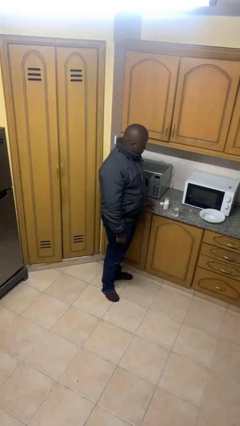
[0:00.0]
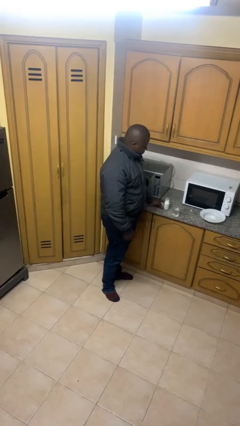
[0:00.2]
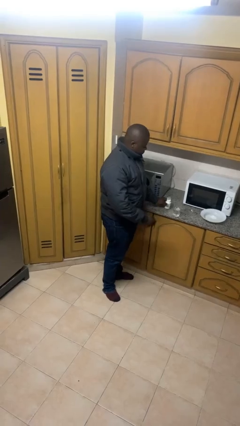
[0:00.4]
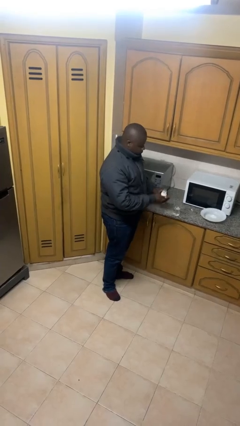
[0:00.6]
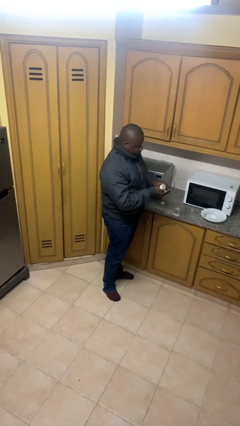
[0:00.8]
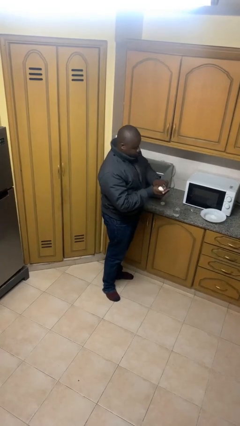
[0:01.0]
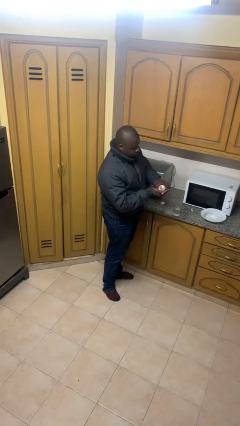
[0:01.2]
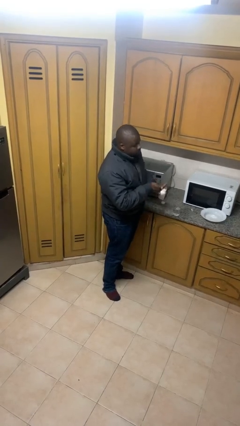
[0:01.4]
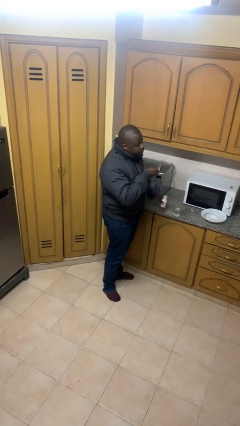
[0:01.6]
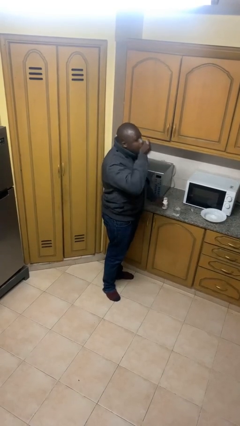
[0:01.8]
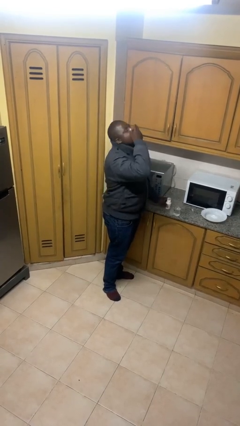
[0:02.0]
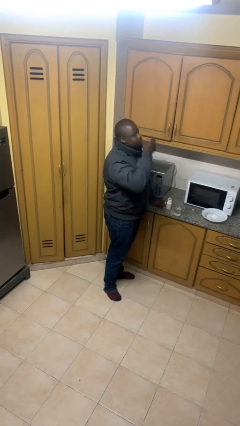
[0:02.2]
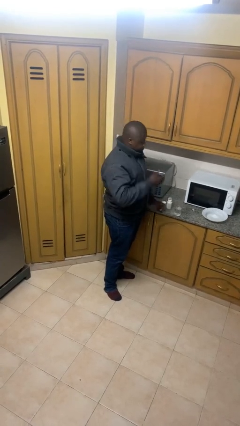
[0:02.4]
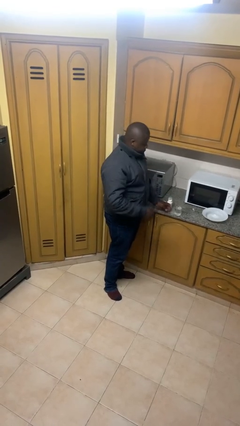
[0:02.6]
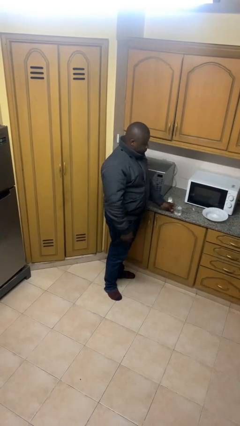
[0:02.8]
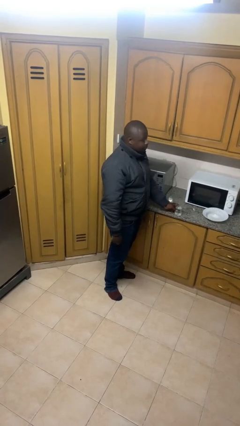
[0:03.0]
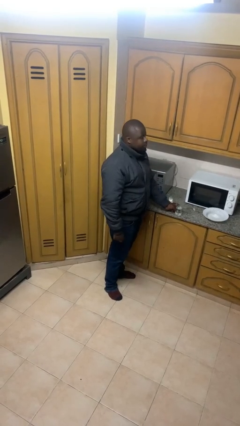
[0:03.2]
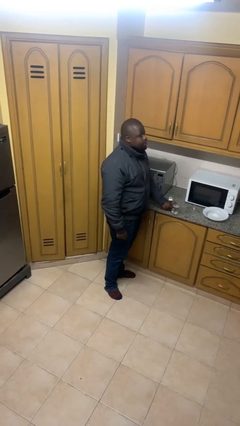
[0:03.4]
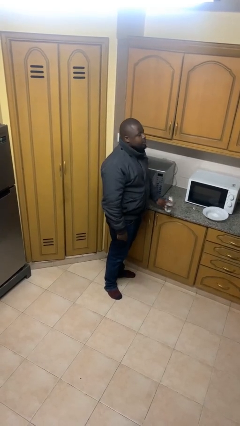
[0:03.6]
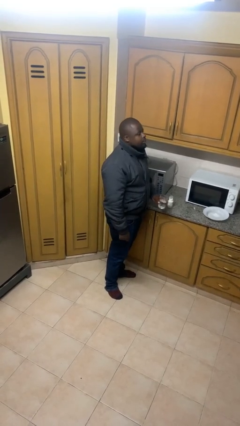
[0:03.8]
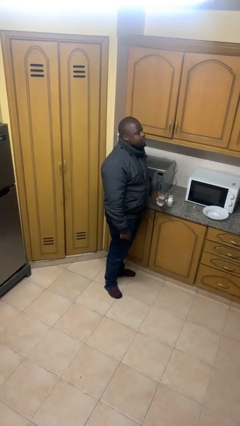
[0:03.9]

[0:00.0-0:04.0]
person takes medicine pills

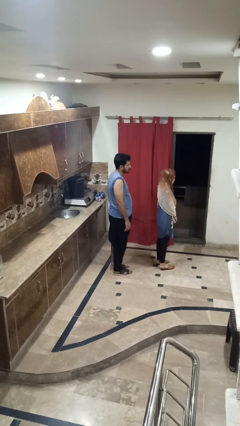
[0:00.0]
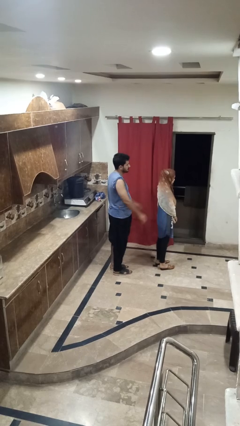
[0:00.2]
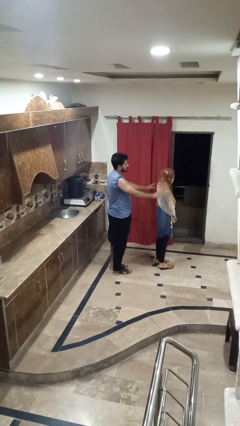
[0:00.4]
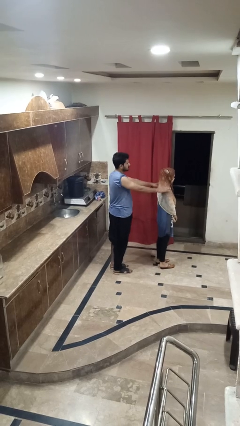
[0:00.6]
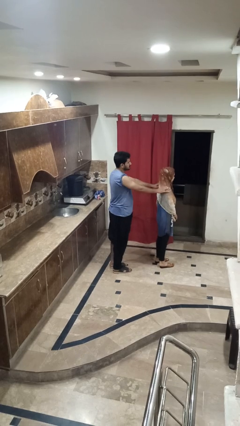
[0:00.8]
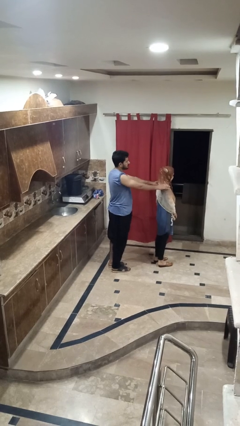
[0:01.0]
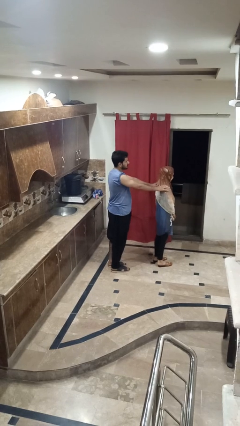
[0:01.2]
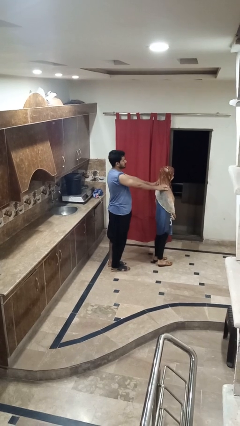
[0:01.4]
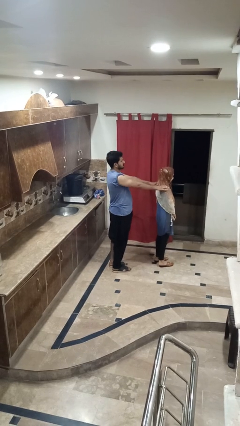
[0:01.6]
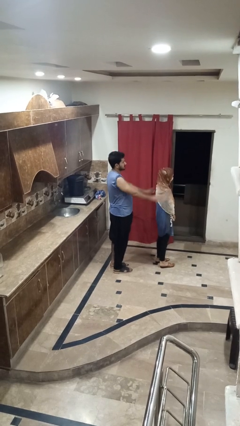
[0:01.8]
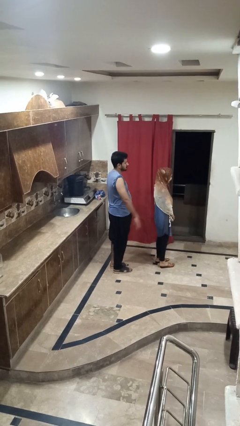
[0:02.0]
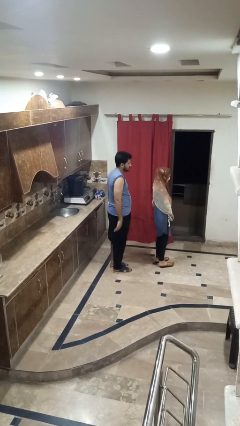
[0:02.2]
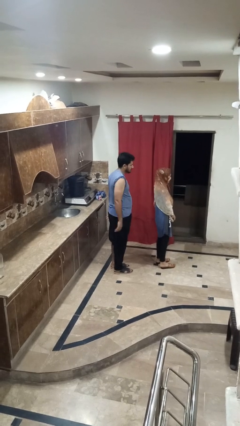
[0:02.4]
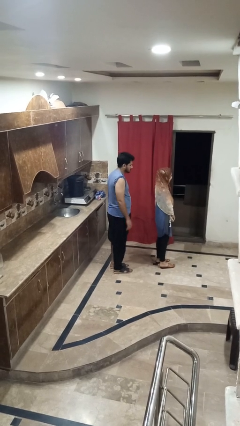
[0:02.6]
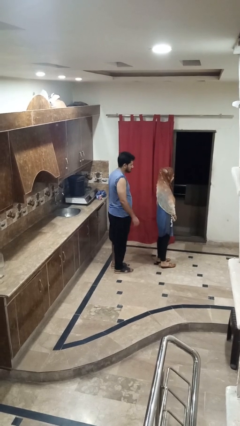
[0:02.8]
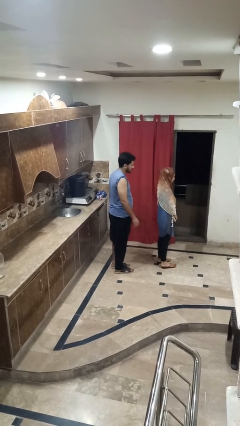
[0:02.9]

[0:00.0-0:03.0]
person touches back of person

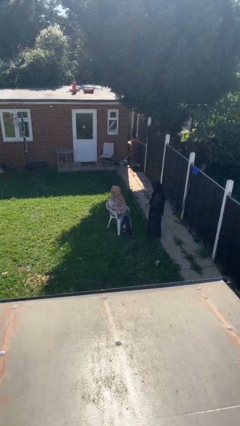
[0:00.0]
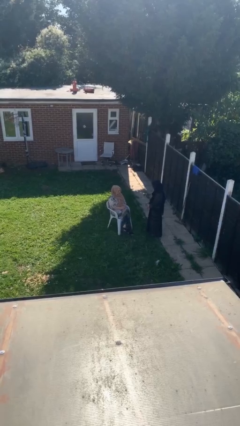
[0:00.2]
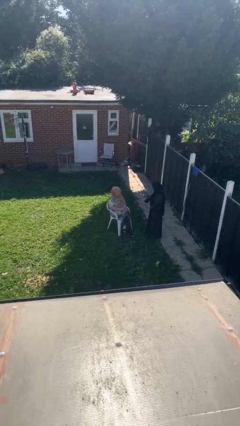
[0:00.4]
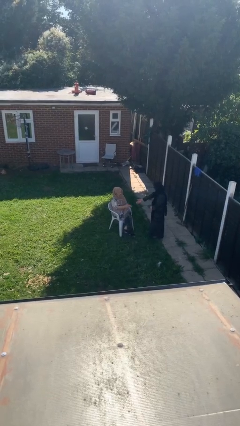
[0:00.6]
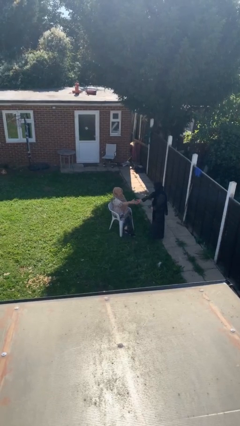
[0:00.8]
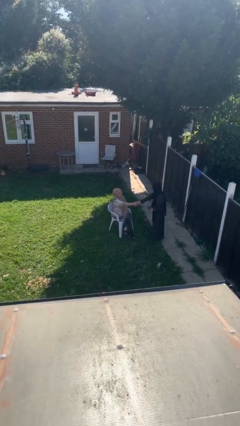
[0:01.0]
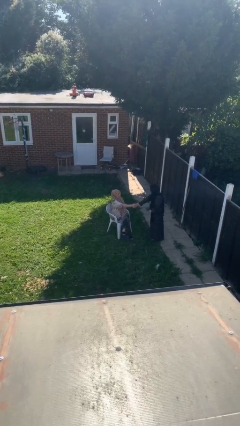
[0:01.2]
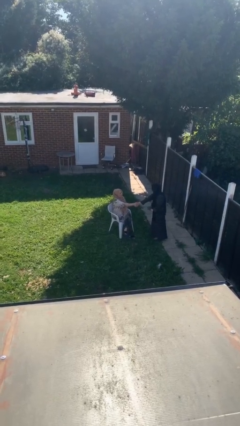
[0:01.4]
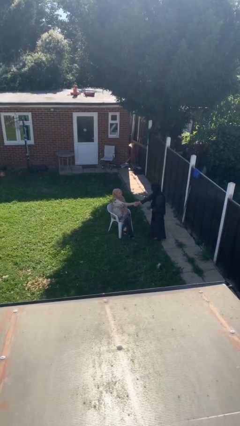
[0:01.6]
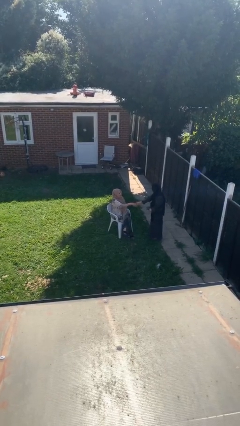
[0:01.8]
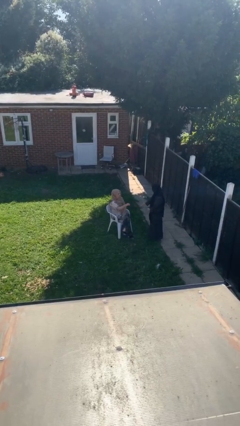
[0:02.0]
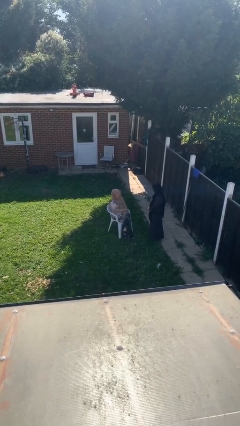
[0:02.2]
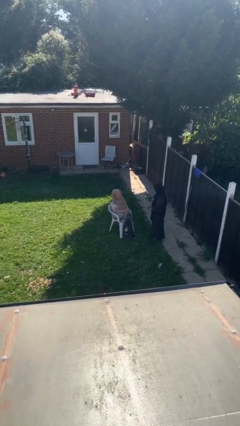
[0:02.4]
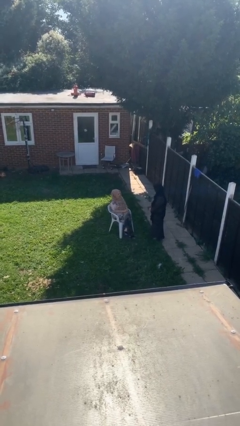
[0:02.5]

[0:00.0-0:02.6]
person shakes hand

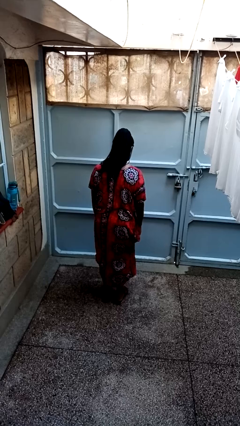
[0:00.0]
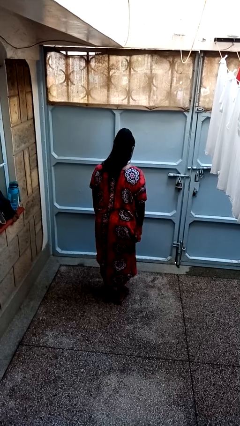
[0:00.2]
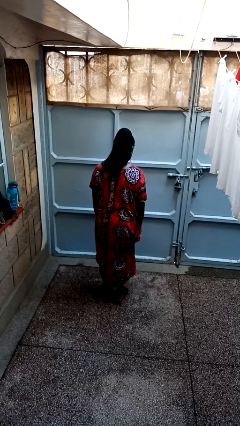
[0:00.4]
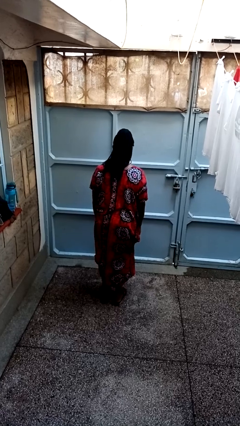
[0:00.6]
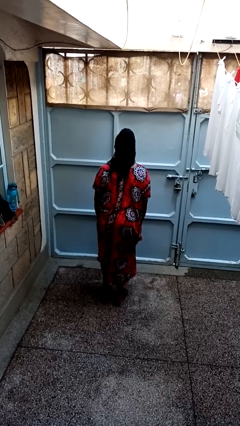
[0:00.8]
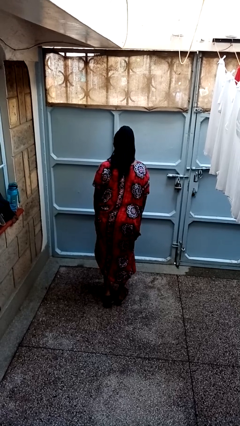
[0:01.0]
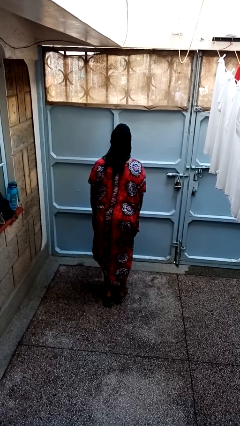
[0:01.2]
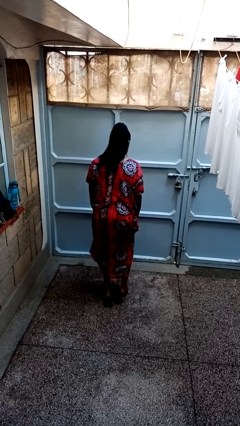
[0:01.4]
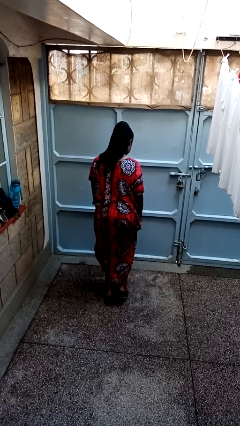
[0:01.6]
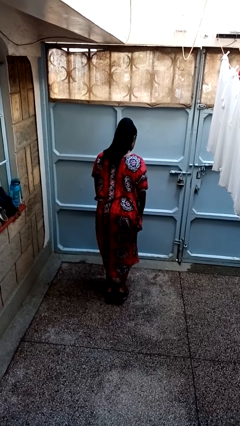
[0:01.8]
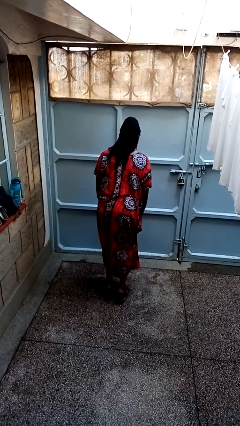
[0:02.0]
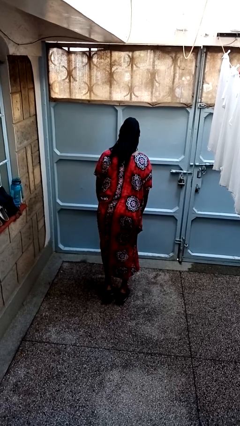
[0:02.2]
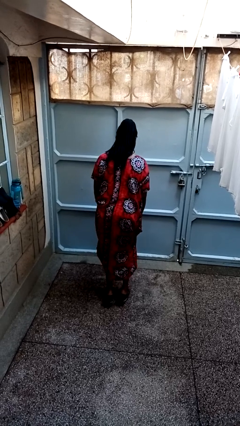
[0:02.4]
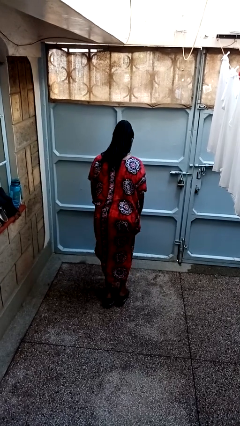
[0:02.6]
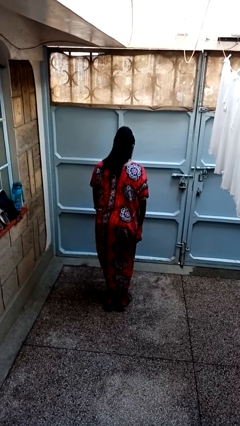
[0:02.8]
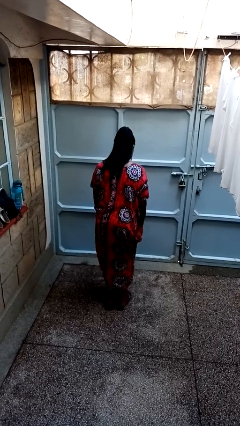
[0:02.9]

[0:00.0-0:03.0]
person walks tiptoe

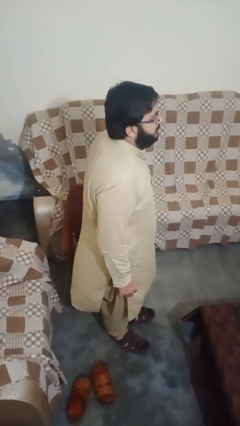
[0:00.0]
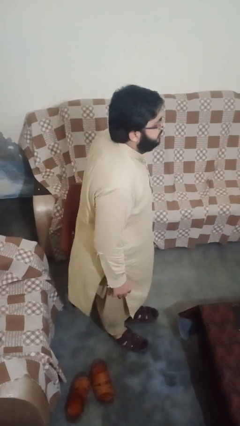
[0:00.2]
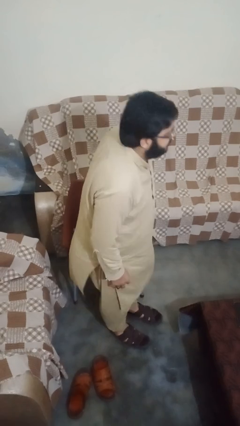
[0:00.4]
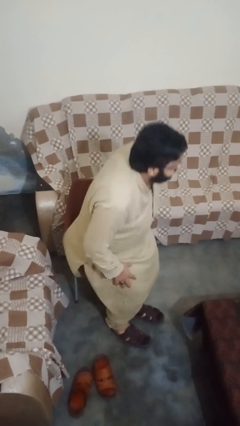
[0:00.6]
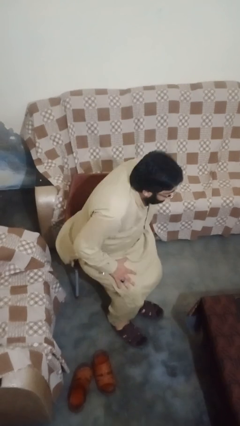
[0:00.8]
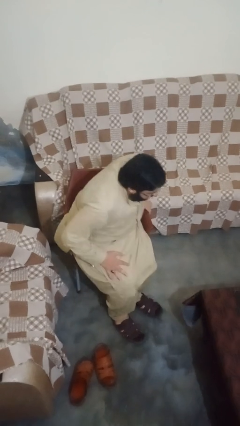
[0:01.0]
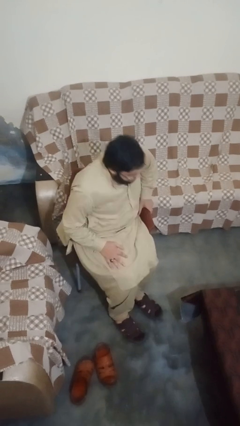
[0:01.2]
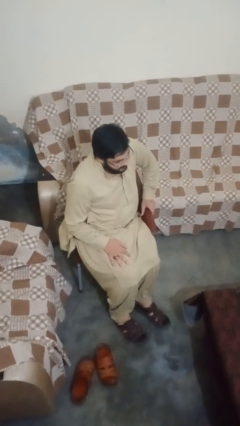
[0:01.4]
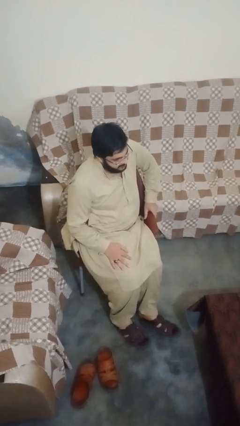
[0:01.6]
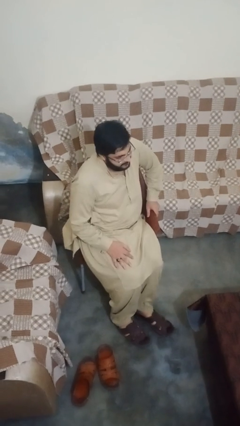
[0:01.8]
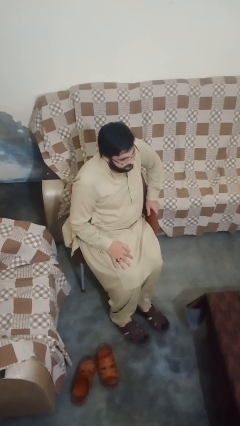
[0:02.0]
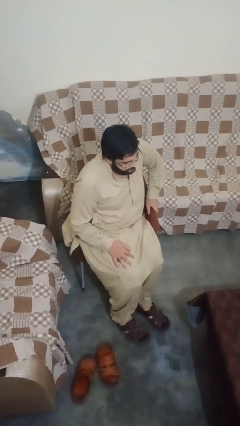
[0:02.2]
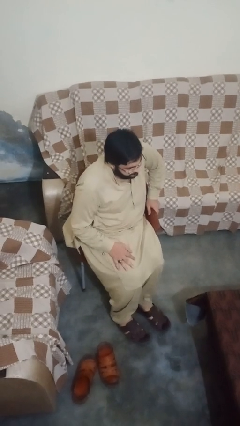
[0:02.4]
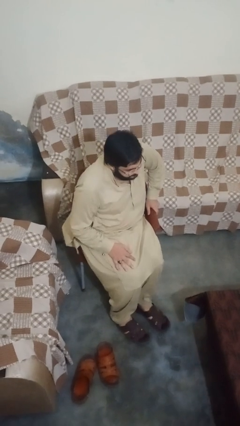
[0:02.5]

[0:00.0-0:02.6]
person sits down

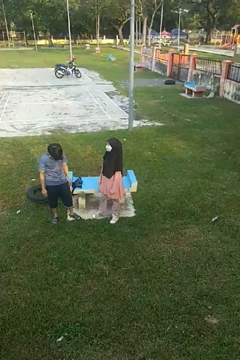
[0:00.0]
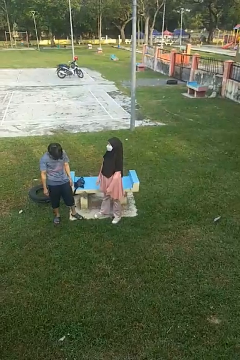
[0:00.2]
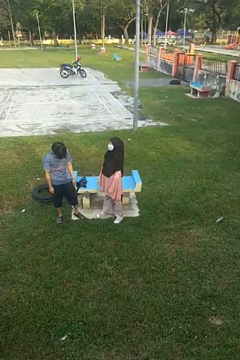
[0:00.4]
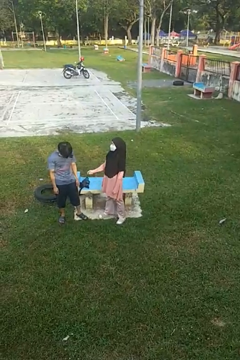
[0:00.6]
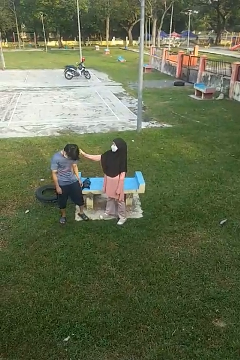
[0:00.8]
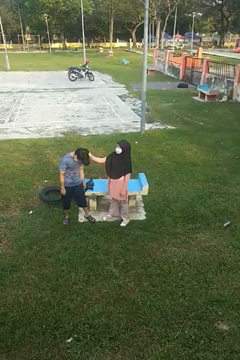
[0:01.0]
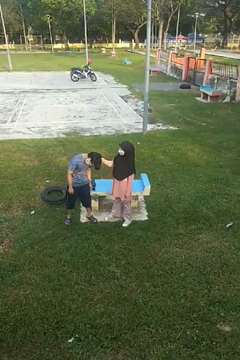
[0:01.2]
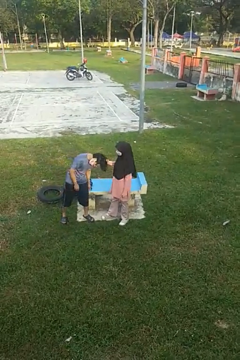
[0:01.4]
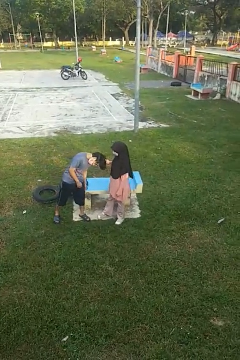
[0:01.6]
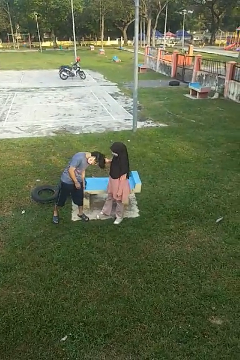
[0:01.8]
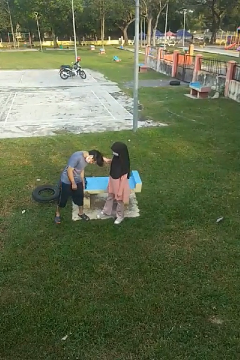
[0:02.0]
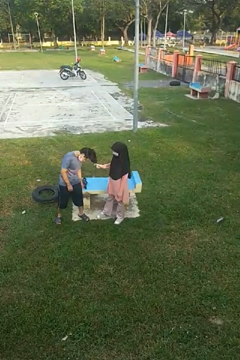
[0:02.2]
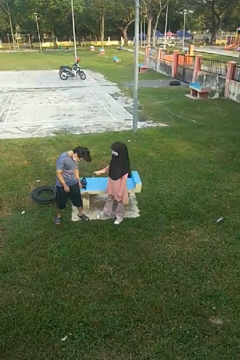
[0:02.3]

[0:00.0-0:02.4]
person grabs person by hair

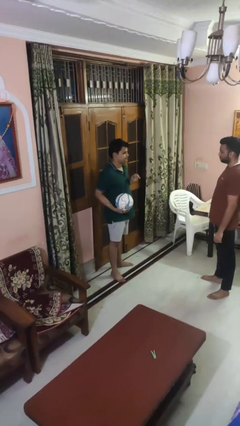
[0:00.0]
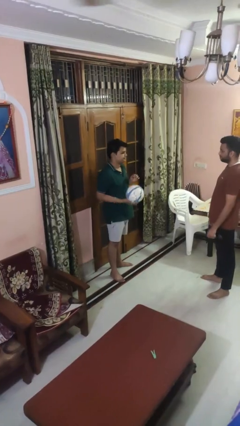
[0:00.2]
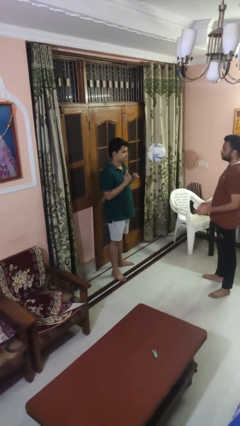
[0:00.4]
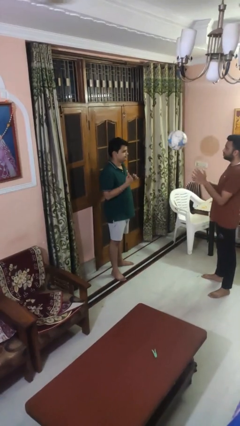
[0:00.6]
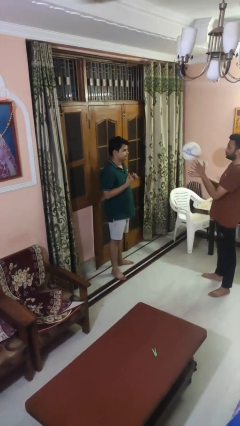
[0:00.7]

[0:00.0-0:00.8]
person throws object to person
